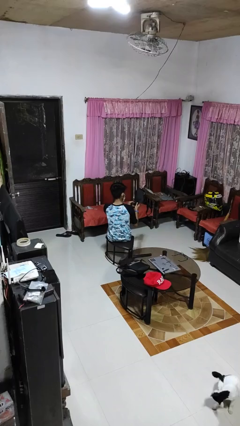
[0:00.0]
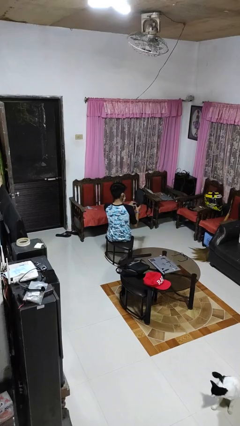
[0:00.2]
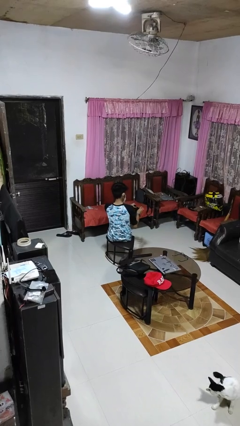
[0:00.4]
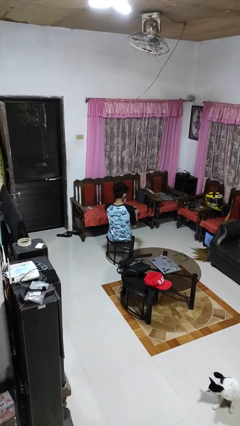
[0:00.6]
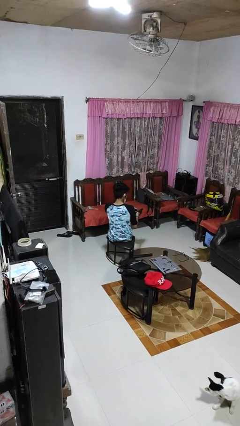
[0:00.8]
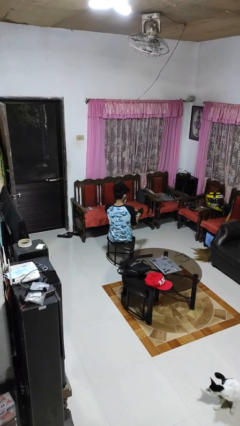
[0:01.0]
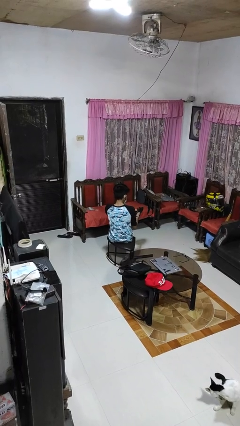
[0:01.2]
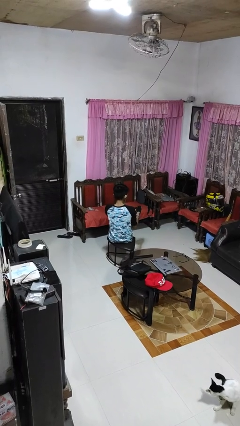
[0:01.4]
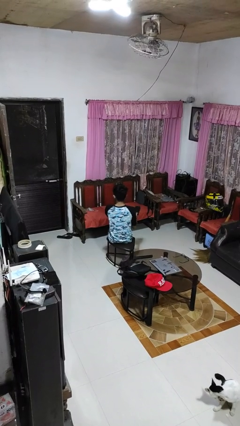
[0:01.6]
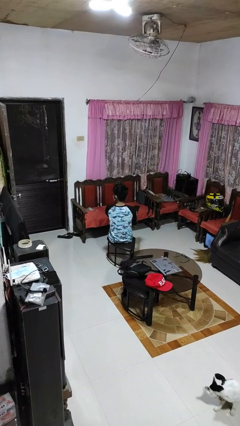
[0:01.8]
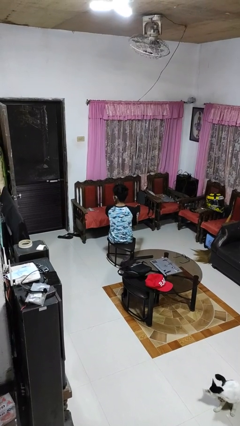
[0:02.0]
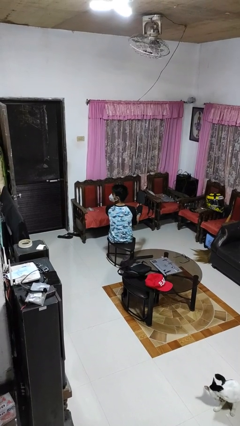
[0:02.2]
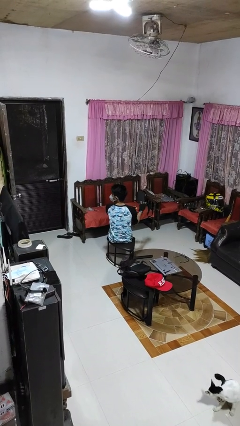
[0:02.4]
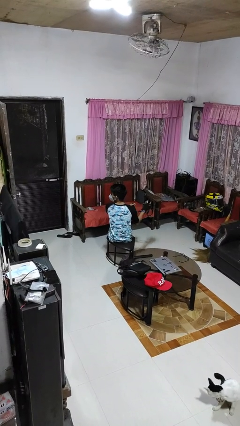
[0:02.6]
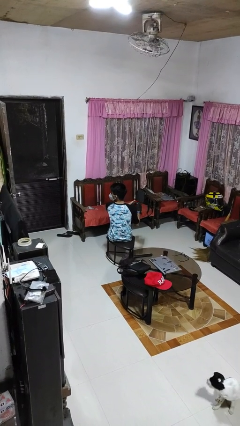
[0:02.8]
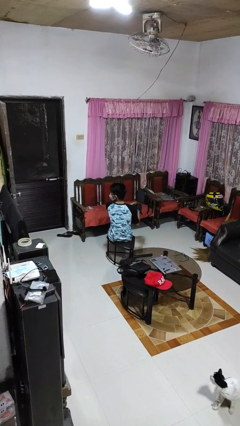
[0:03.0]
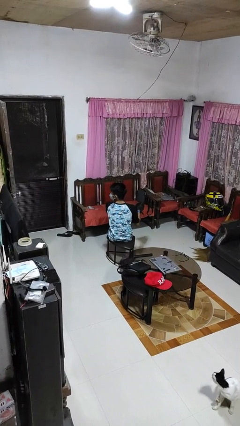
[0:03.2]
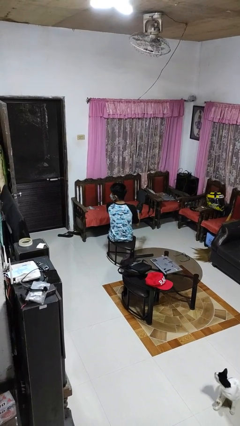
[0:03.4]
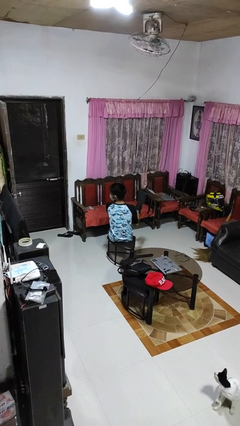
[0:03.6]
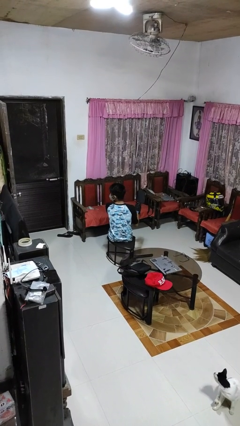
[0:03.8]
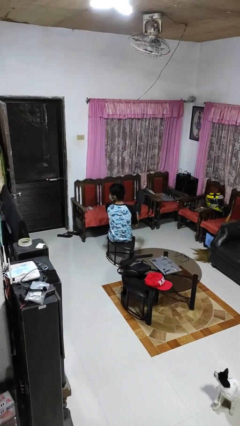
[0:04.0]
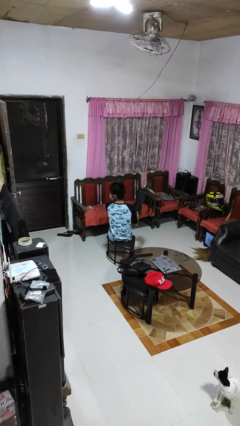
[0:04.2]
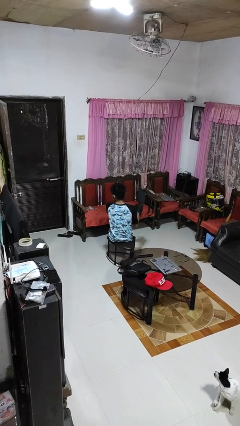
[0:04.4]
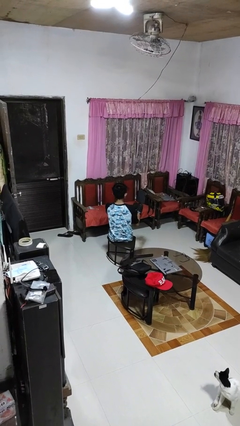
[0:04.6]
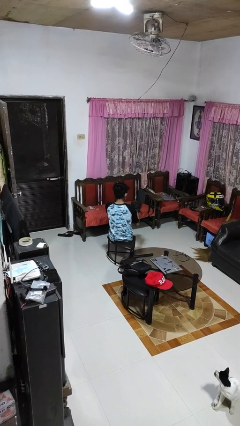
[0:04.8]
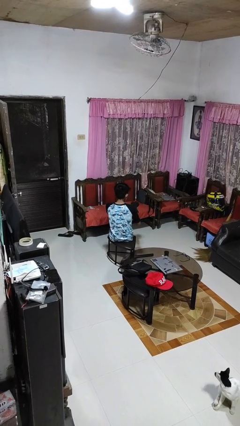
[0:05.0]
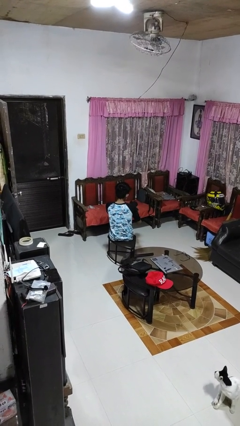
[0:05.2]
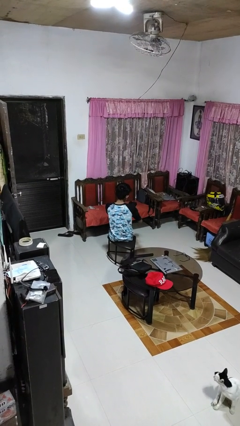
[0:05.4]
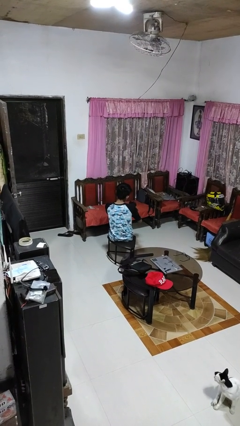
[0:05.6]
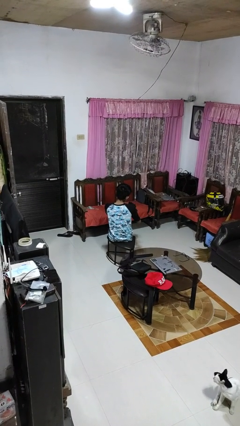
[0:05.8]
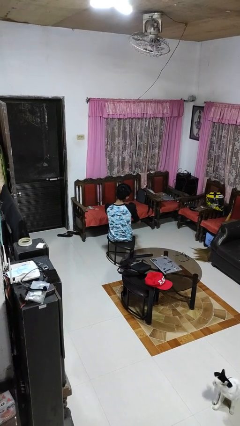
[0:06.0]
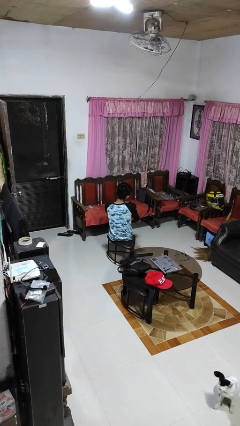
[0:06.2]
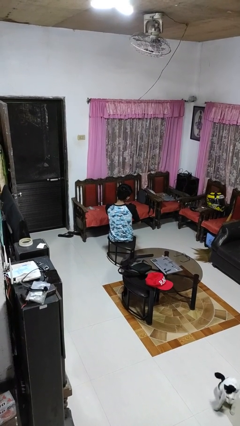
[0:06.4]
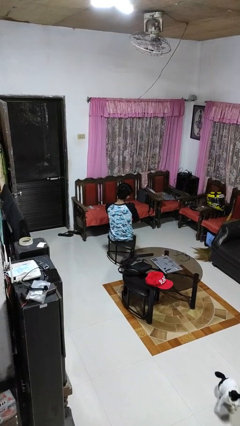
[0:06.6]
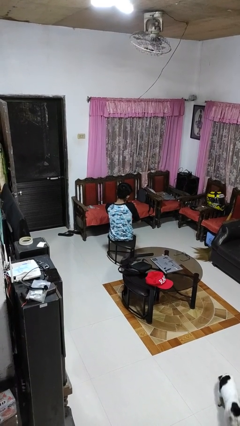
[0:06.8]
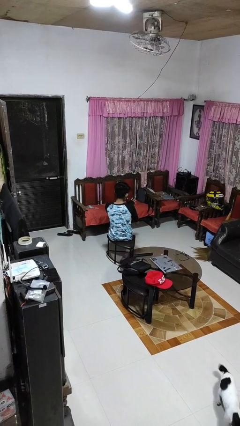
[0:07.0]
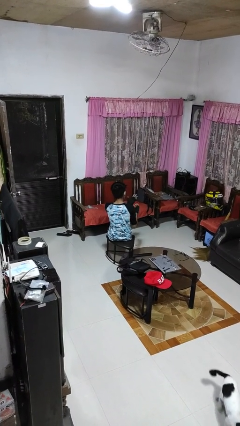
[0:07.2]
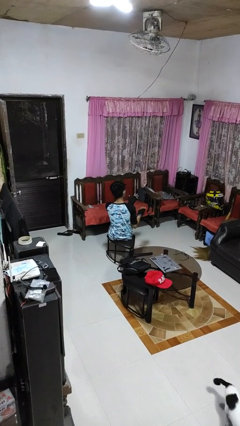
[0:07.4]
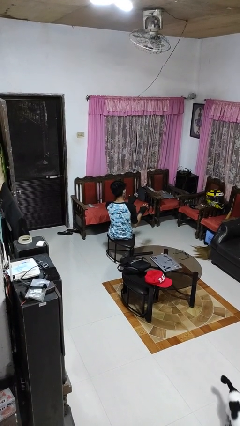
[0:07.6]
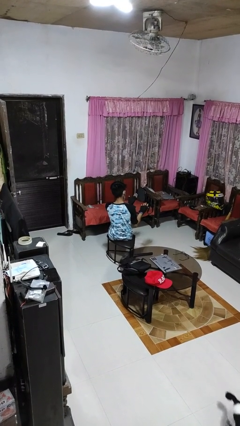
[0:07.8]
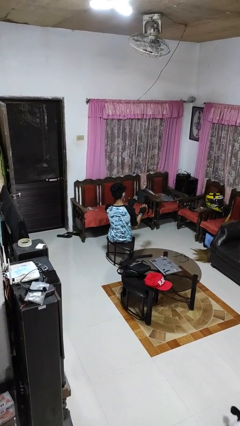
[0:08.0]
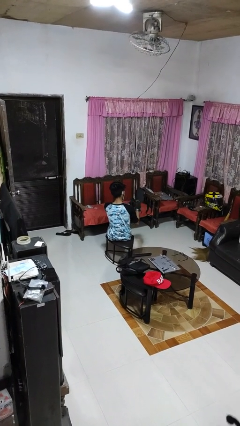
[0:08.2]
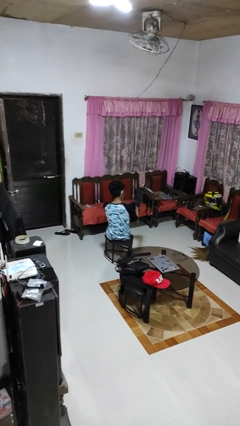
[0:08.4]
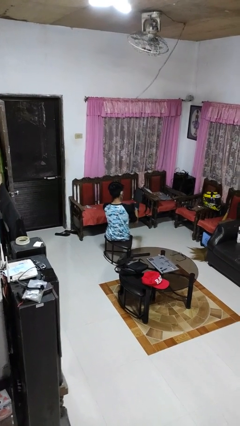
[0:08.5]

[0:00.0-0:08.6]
person puts on gloves

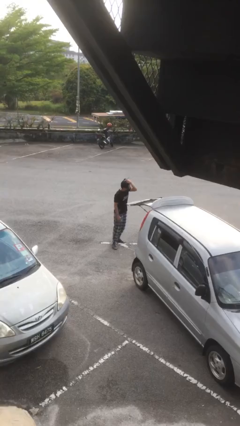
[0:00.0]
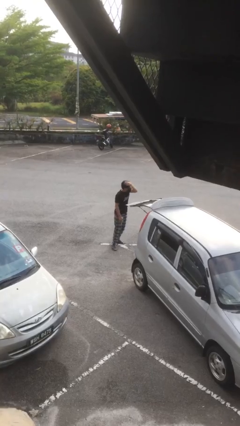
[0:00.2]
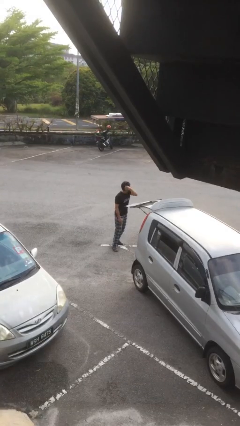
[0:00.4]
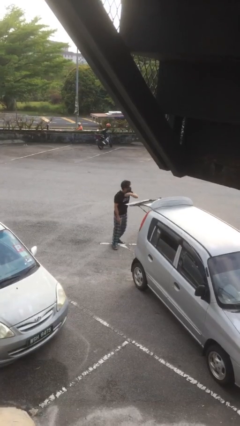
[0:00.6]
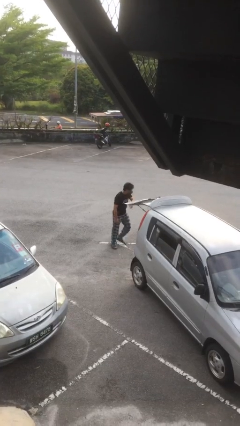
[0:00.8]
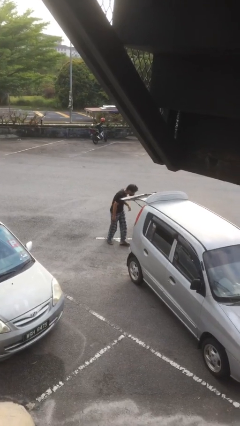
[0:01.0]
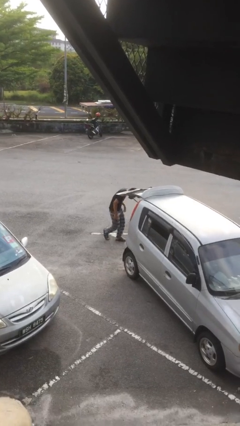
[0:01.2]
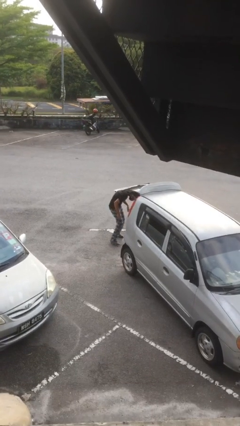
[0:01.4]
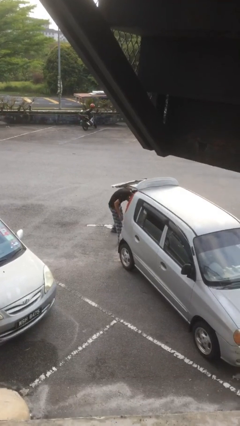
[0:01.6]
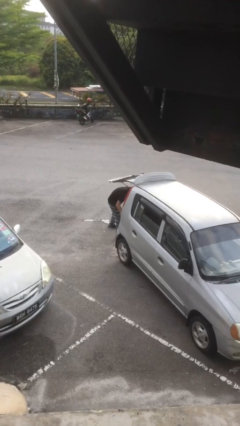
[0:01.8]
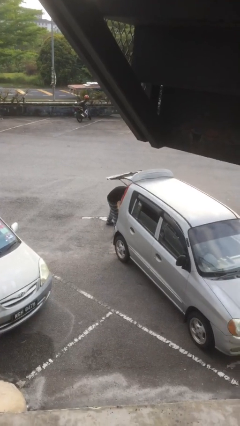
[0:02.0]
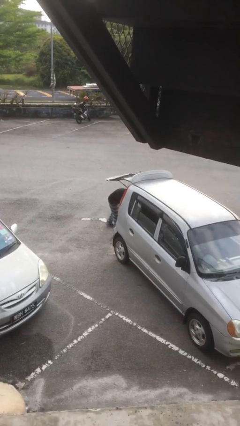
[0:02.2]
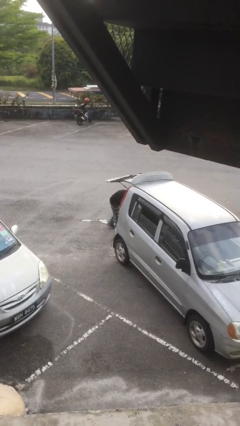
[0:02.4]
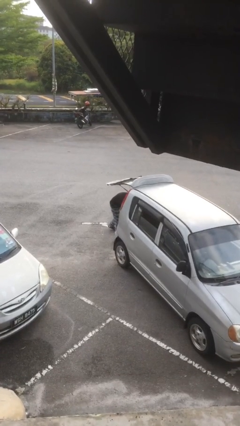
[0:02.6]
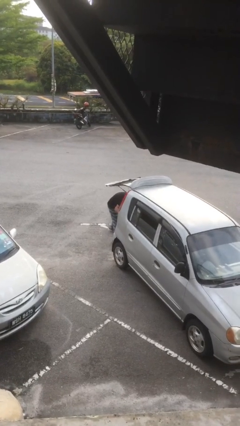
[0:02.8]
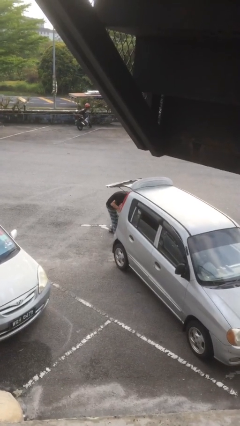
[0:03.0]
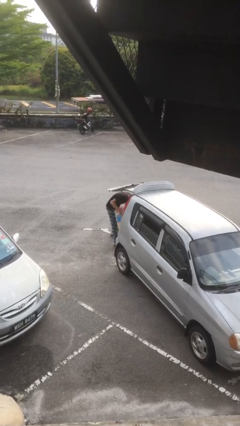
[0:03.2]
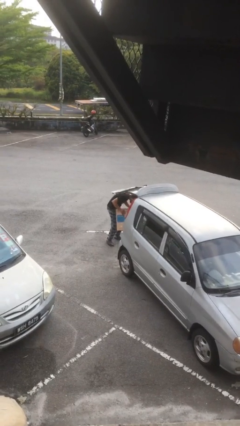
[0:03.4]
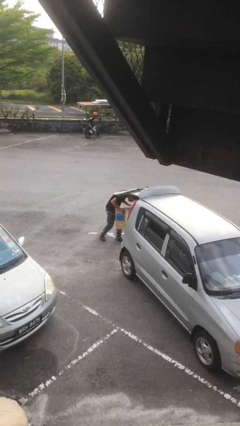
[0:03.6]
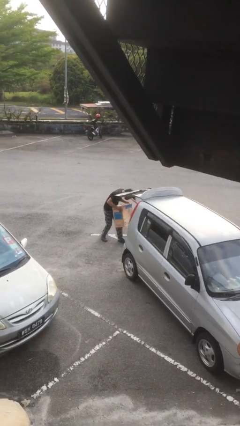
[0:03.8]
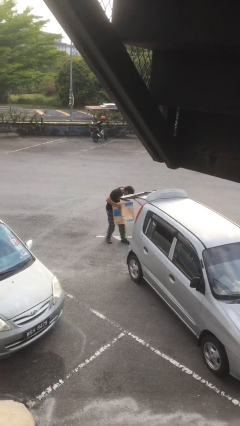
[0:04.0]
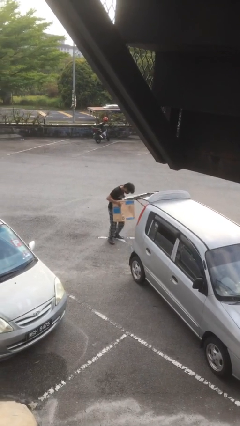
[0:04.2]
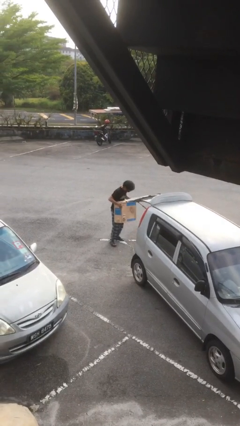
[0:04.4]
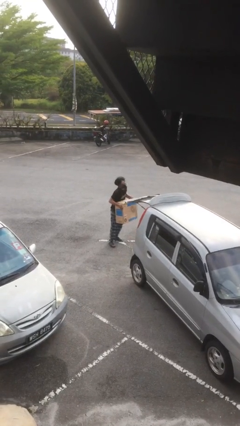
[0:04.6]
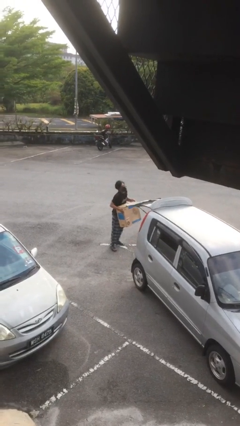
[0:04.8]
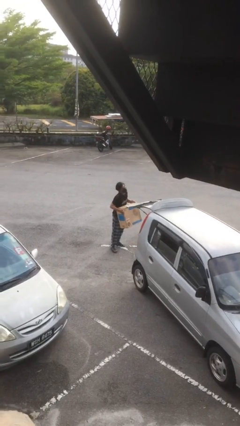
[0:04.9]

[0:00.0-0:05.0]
person unloads car

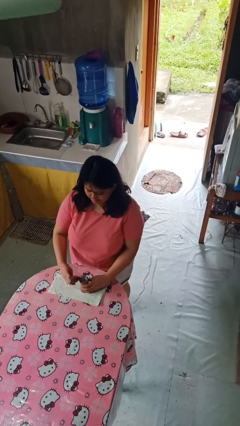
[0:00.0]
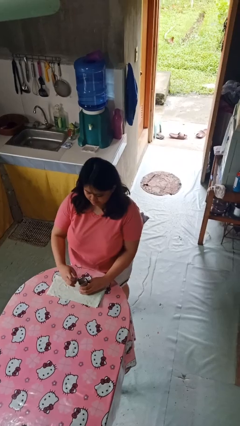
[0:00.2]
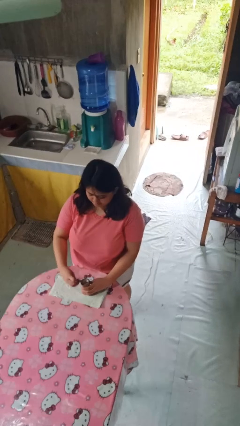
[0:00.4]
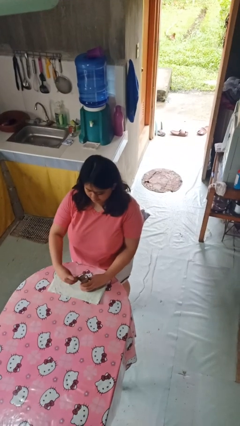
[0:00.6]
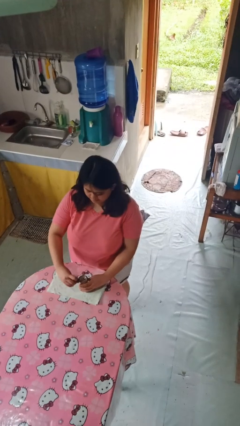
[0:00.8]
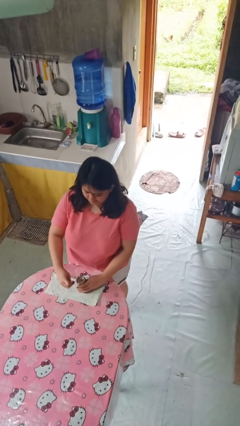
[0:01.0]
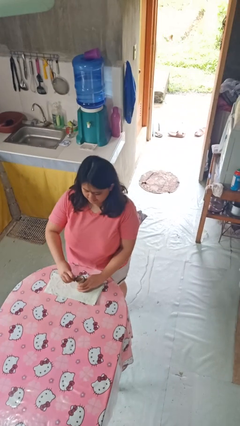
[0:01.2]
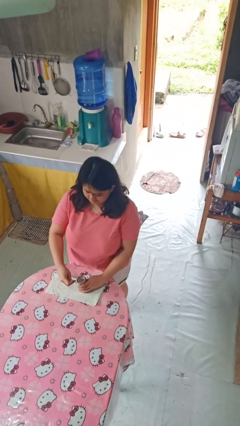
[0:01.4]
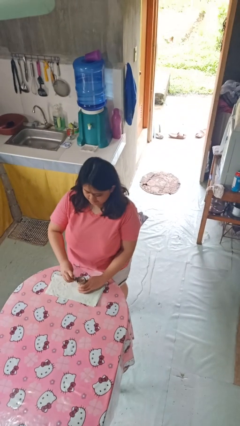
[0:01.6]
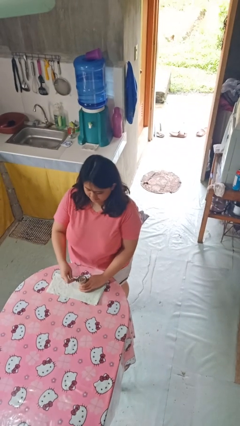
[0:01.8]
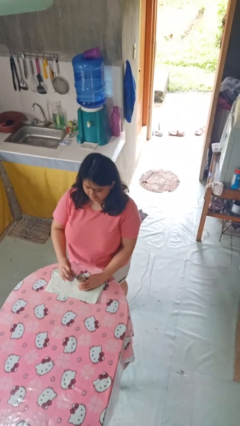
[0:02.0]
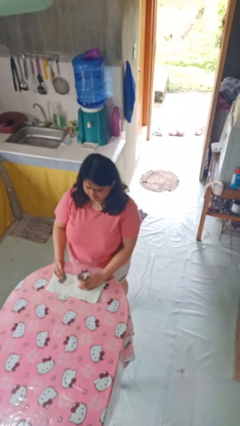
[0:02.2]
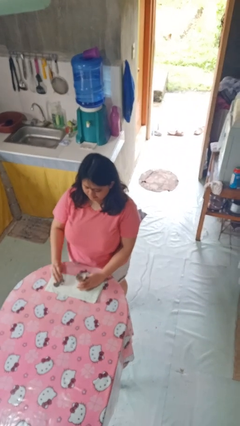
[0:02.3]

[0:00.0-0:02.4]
person opens can with can opener

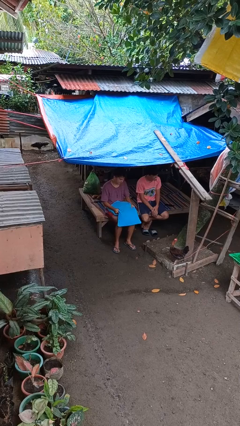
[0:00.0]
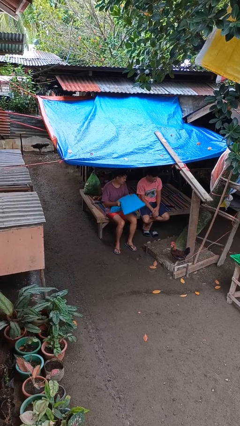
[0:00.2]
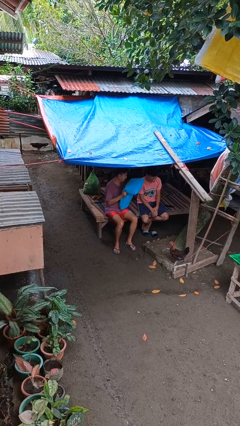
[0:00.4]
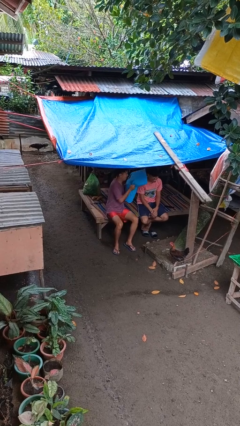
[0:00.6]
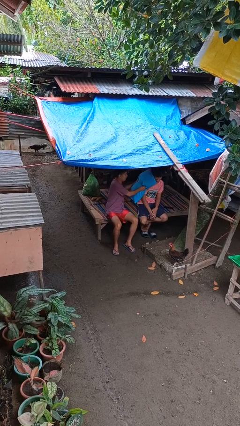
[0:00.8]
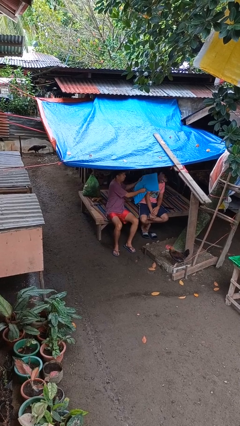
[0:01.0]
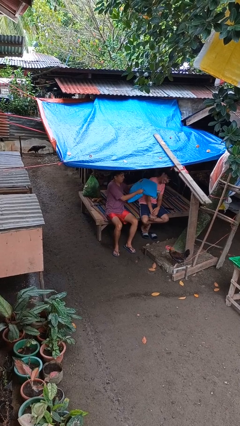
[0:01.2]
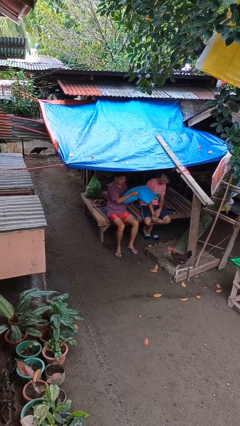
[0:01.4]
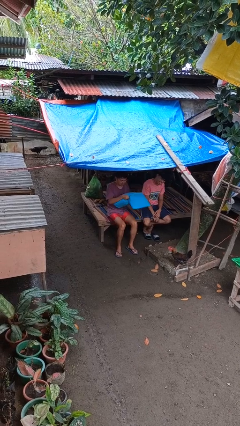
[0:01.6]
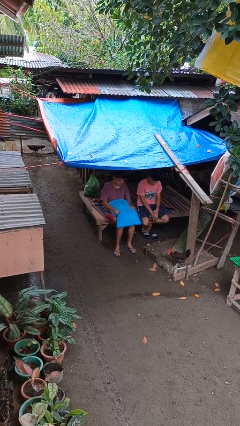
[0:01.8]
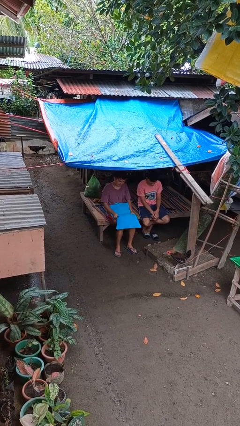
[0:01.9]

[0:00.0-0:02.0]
person hits person with pillow

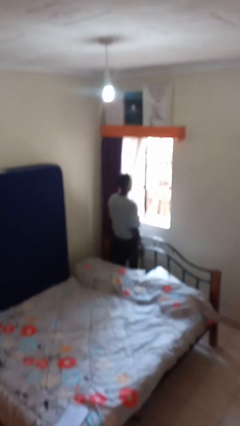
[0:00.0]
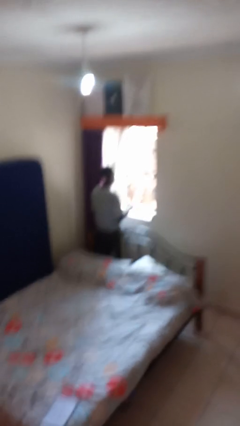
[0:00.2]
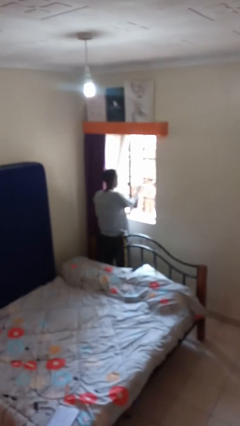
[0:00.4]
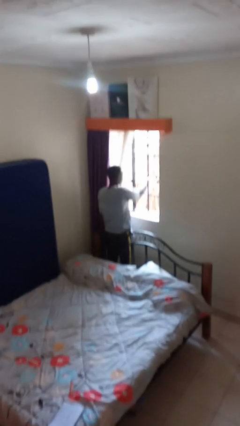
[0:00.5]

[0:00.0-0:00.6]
person opens home window
